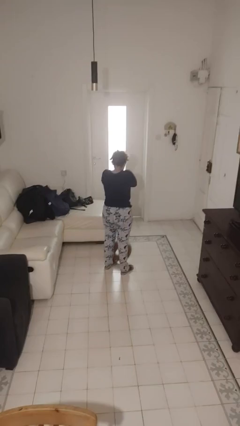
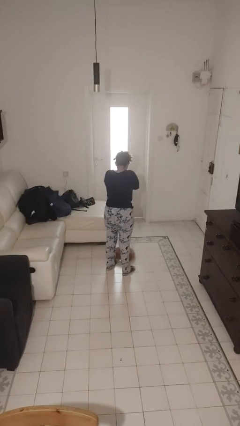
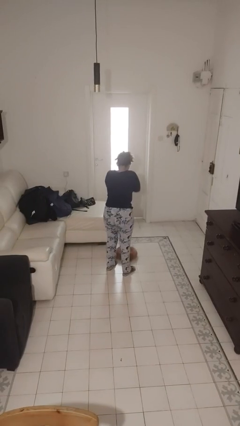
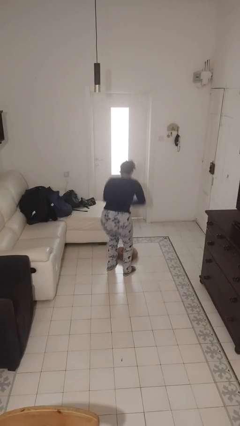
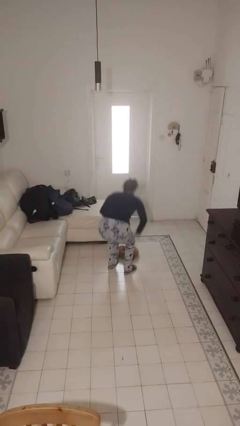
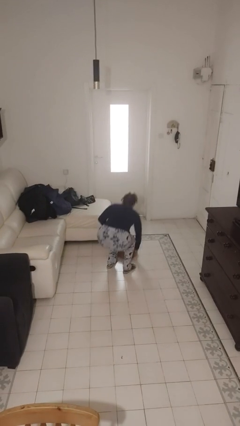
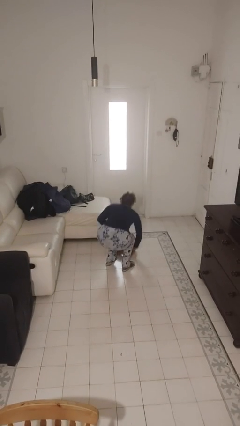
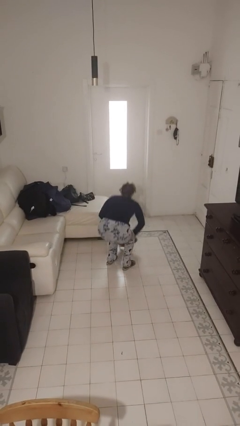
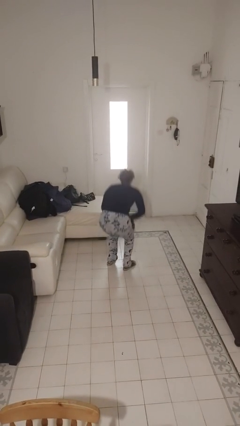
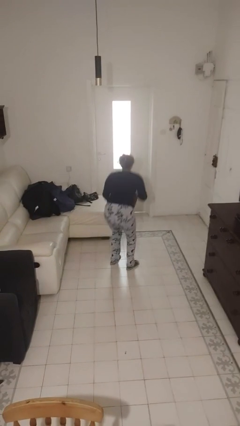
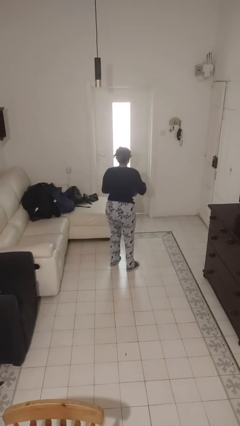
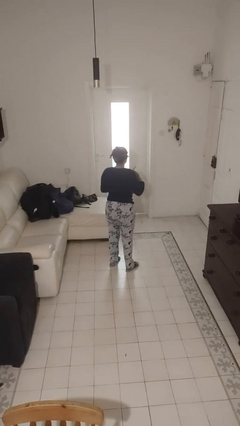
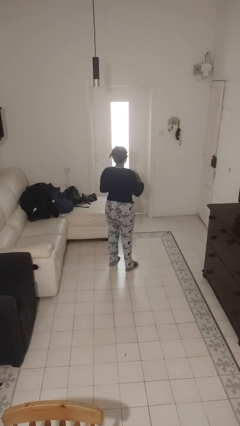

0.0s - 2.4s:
person picks up object from floor

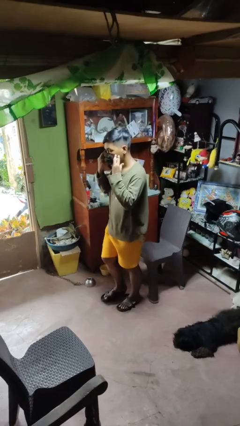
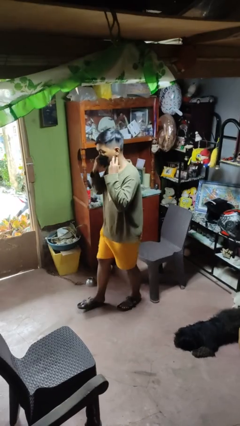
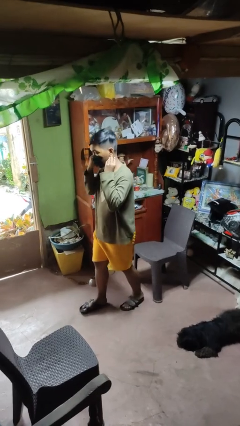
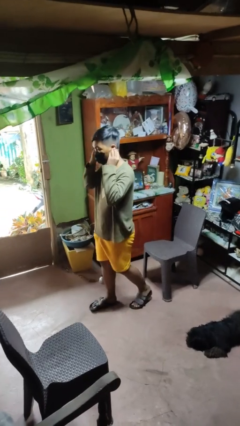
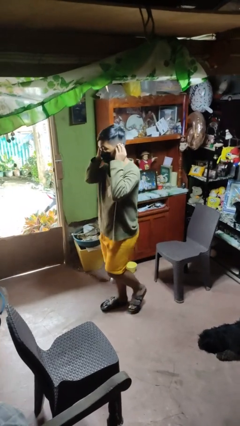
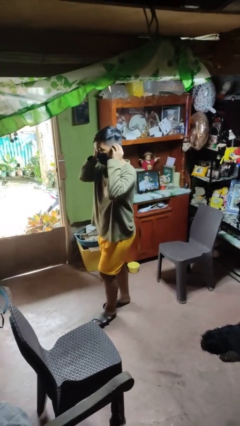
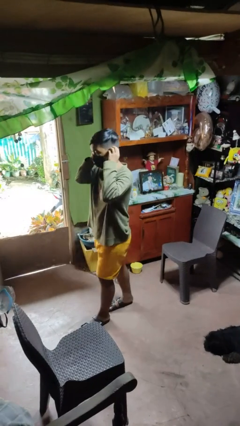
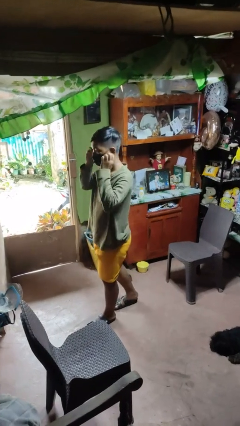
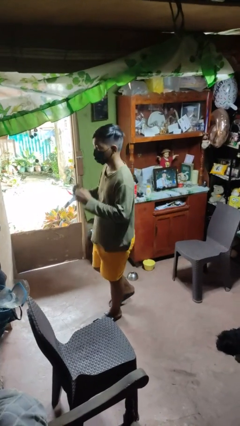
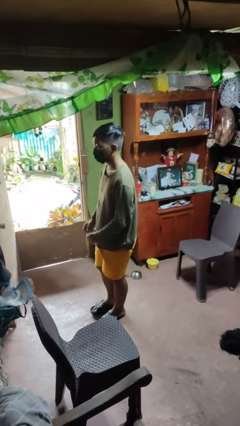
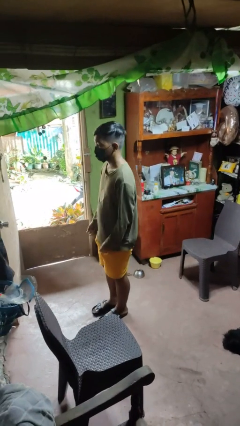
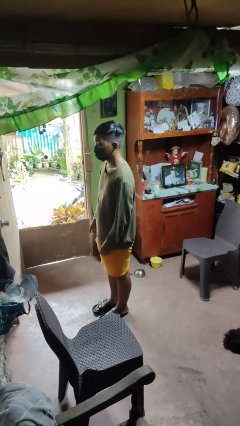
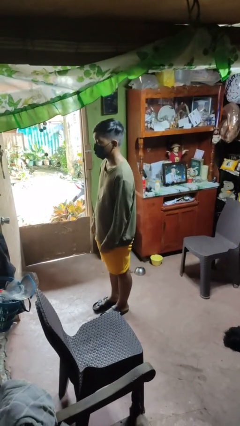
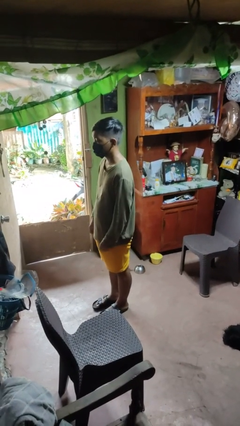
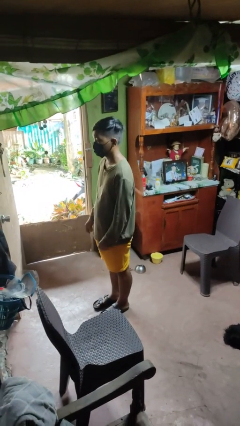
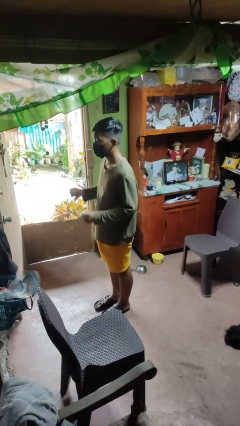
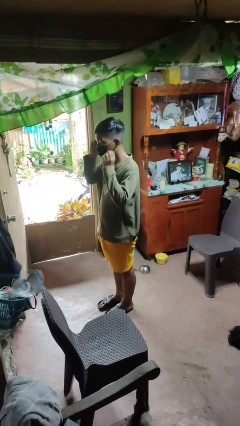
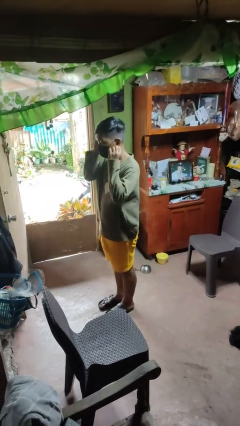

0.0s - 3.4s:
person puts on facemask

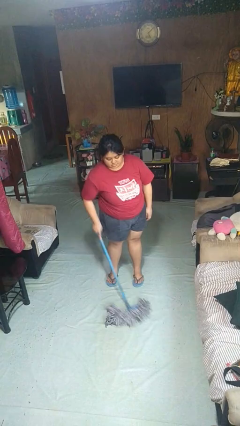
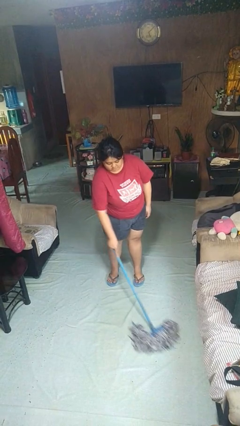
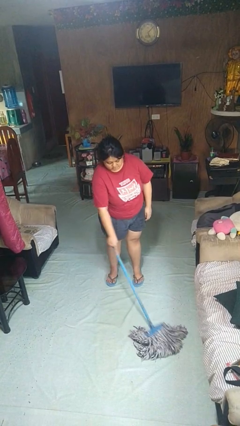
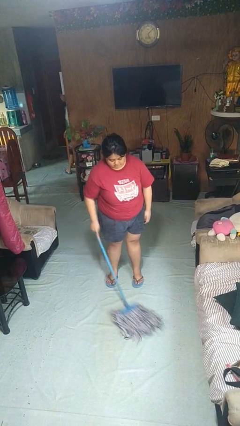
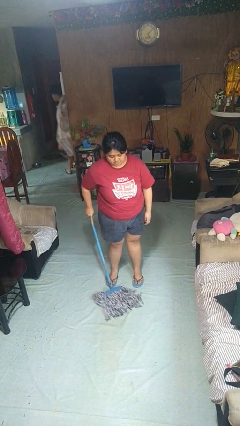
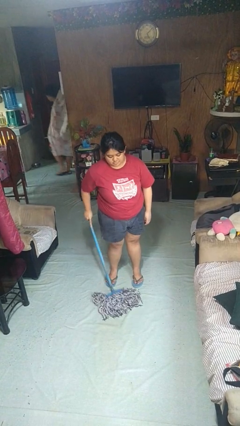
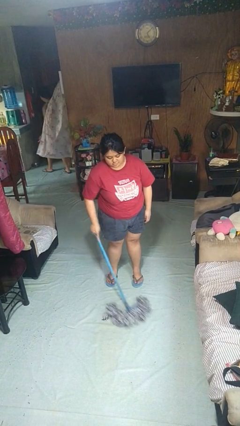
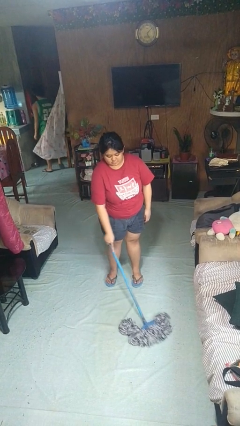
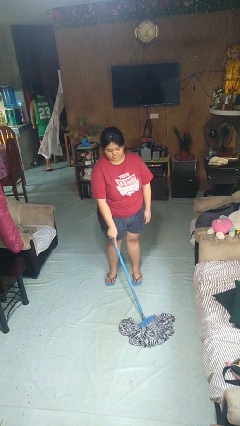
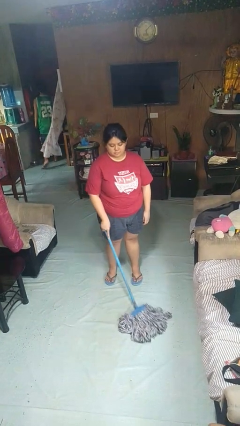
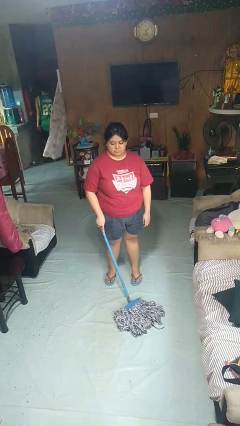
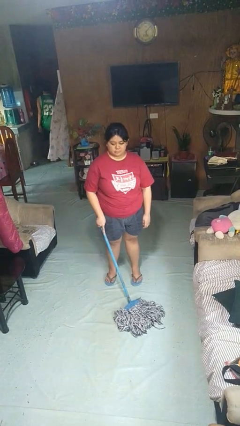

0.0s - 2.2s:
person mops

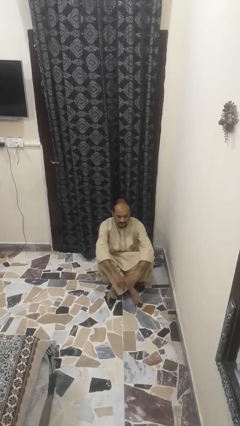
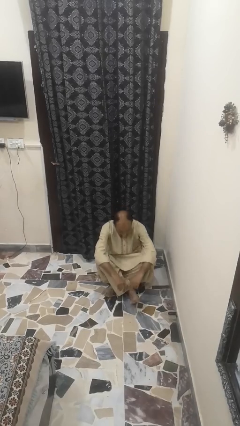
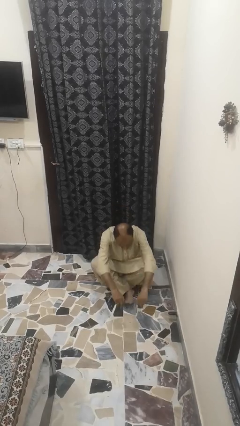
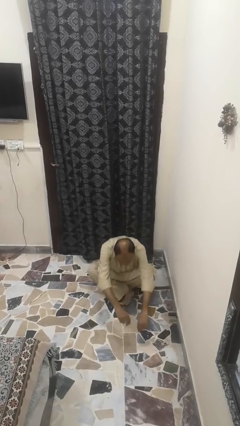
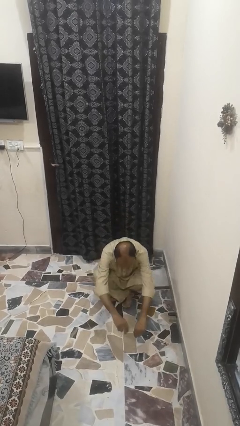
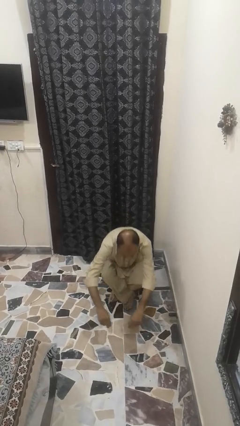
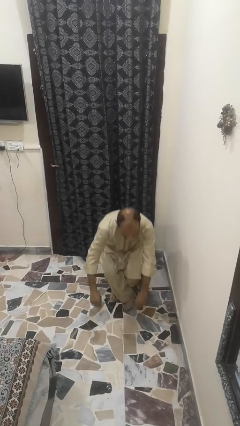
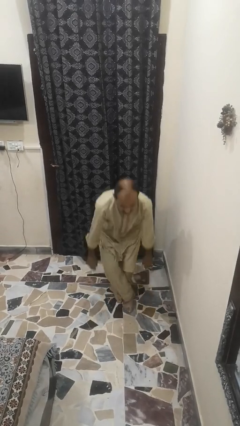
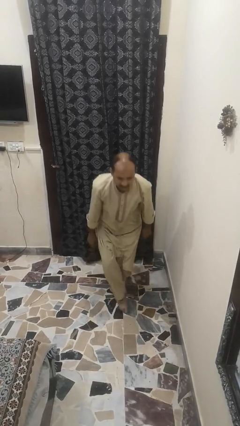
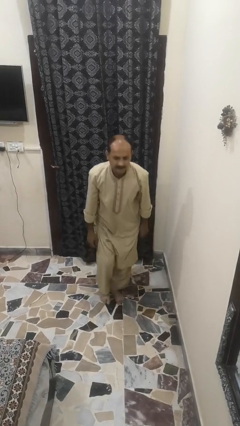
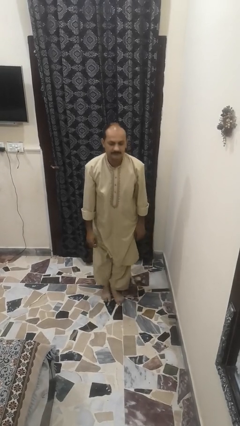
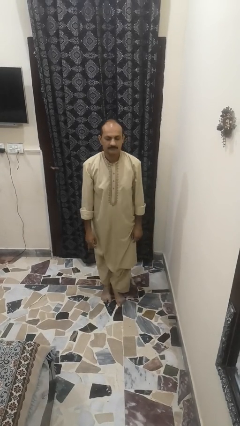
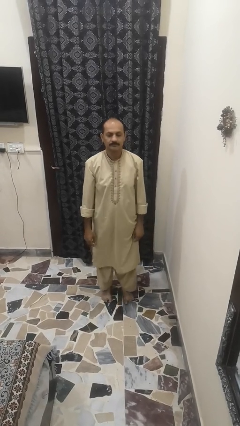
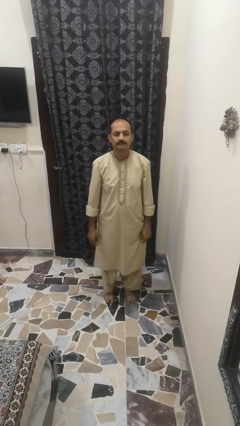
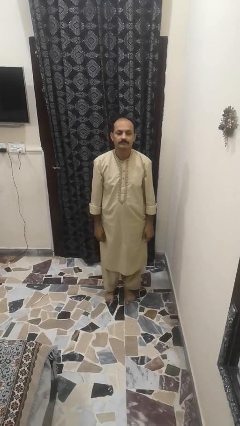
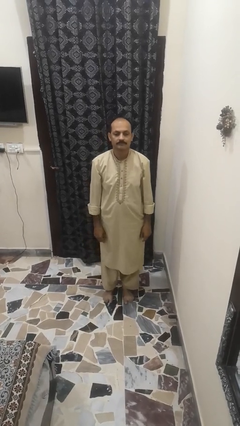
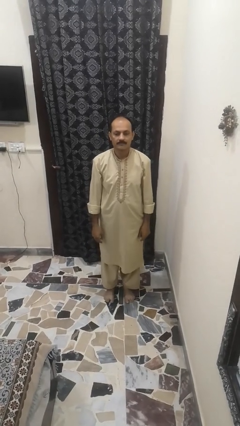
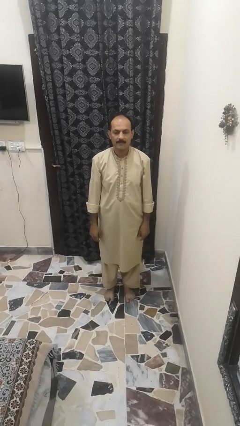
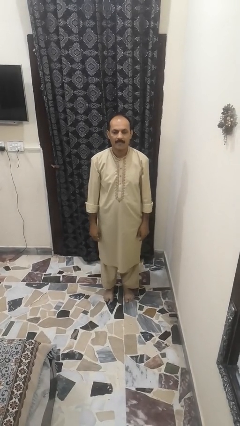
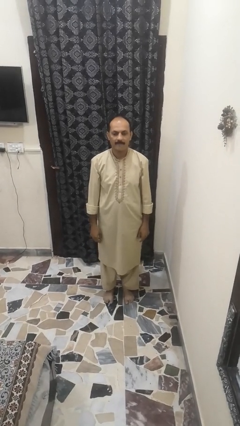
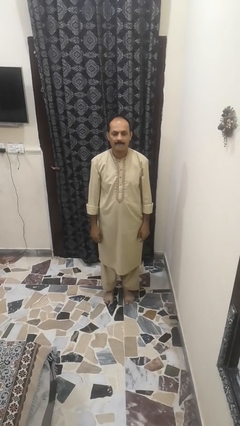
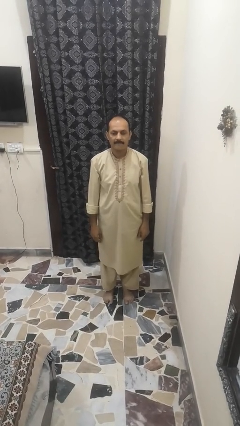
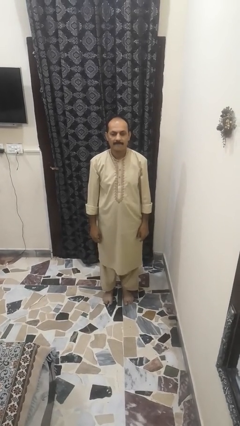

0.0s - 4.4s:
person stands up from floor

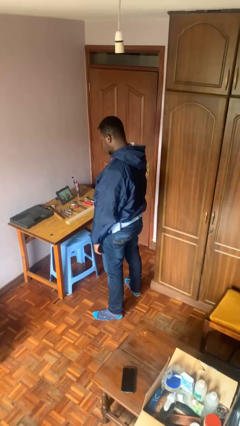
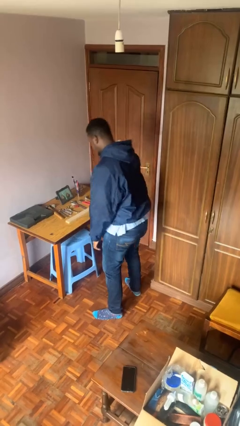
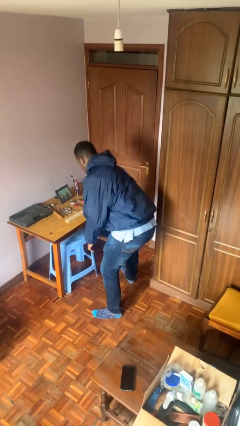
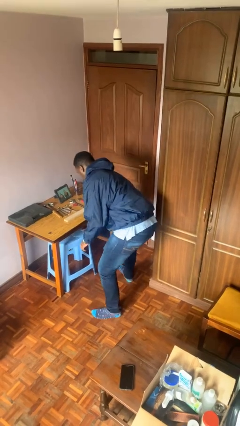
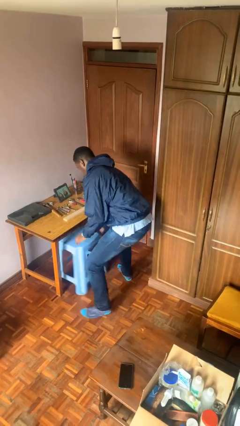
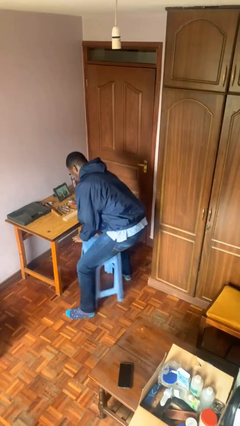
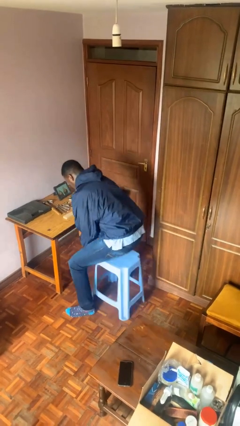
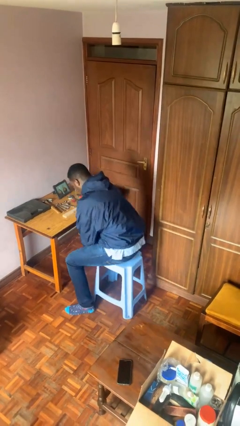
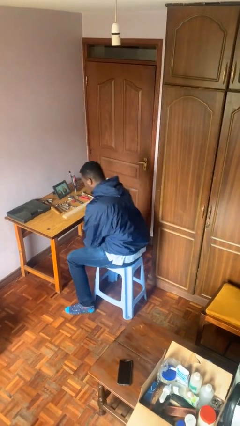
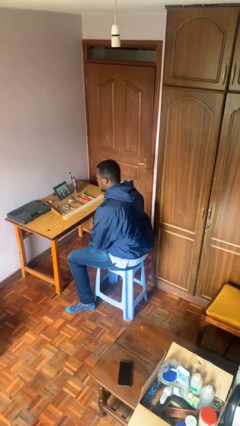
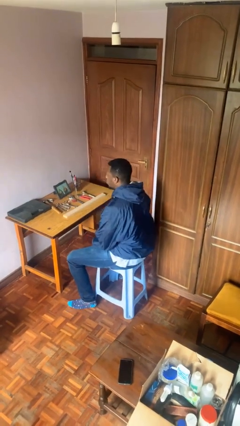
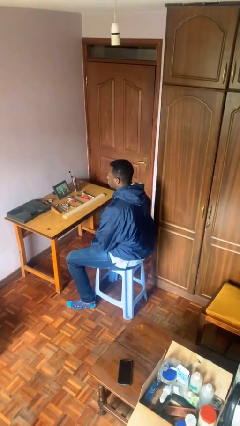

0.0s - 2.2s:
person sits down

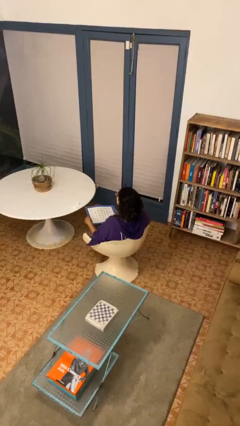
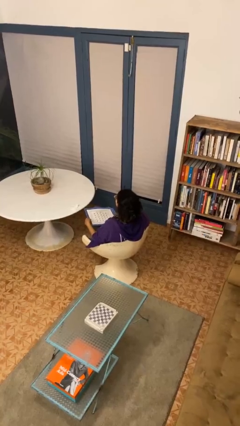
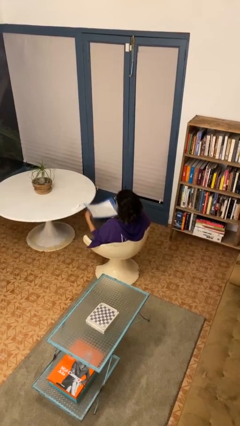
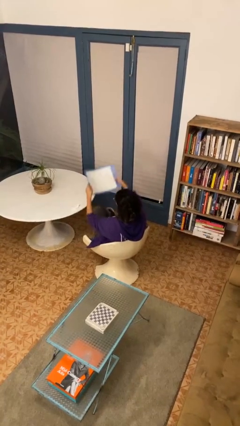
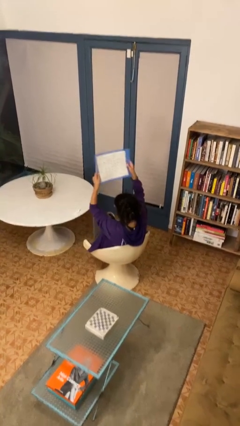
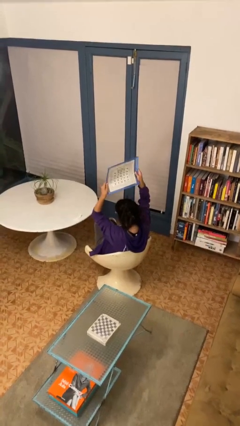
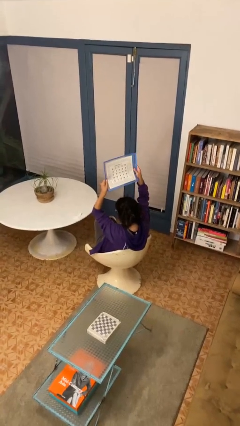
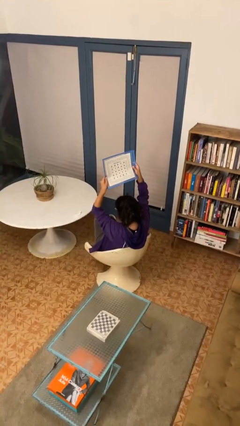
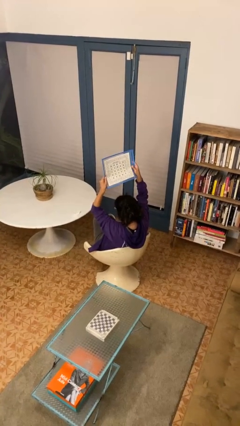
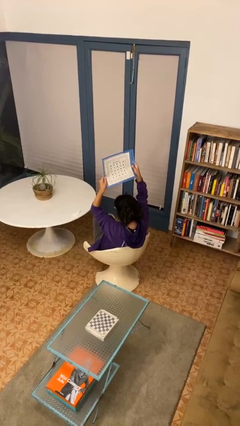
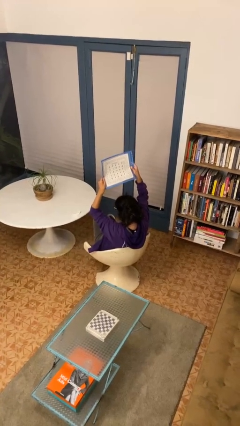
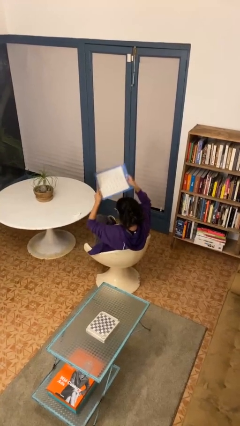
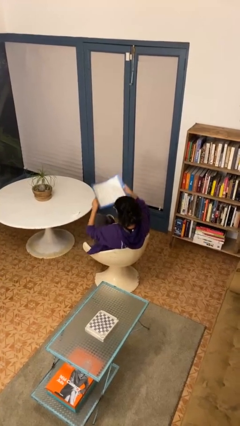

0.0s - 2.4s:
person holds object above head

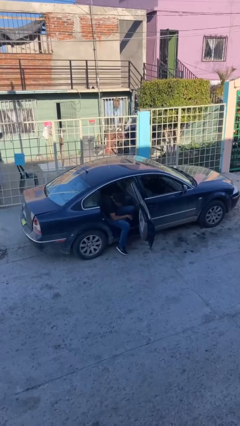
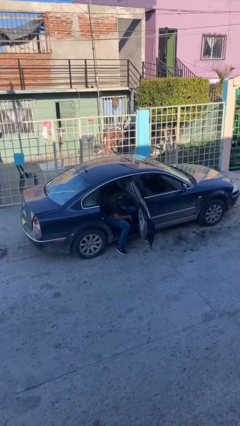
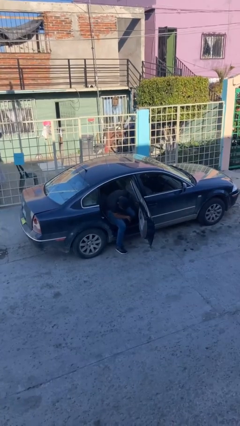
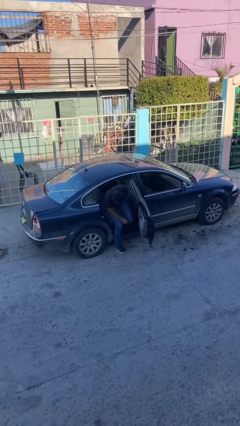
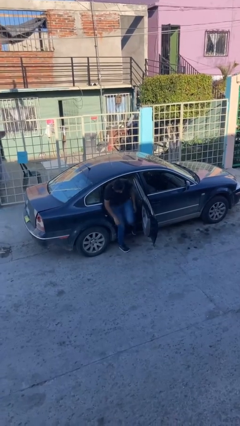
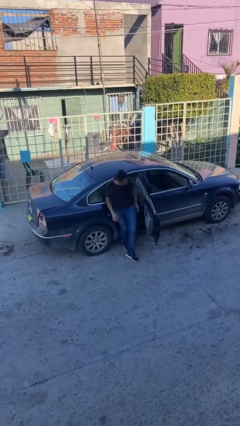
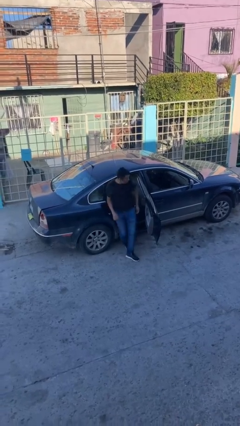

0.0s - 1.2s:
person exits car
